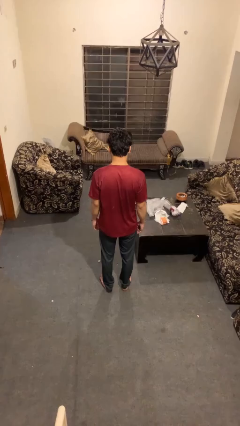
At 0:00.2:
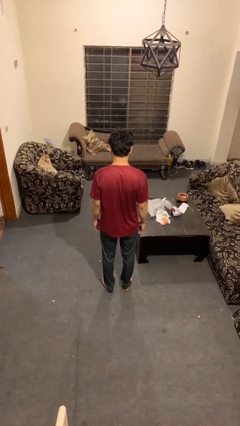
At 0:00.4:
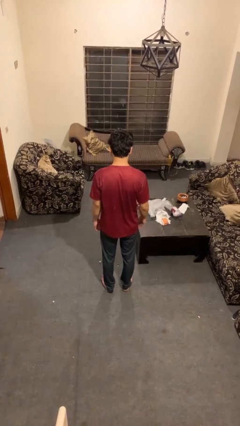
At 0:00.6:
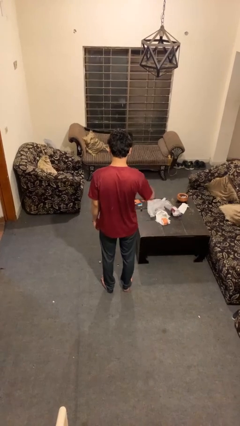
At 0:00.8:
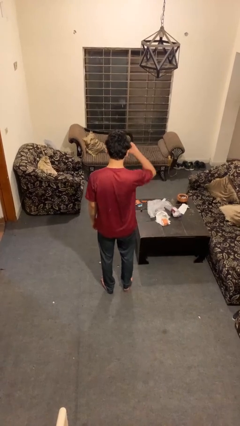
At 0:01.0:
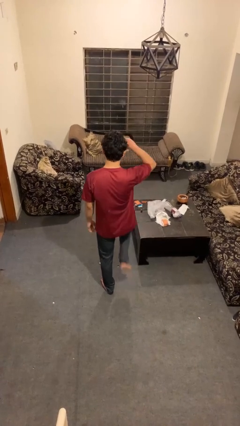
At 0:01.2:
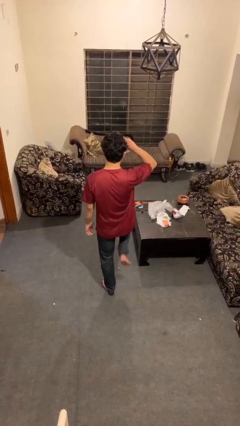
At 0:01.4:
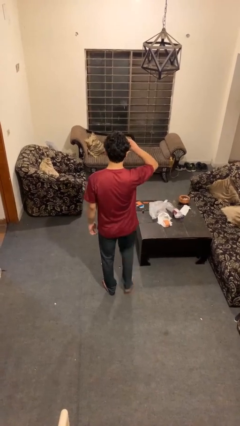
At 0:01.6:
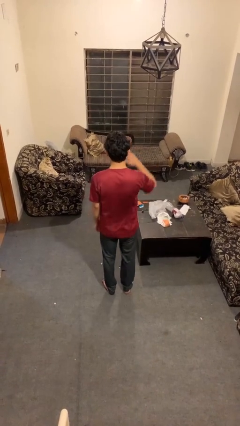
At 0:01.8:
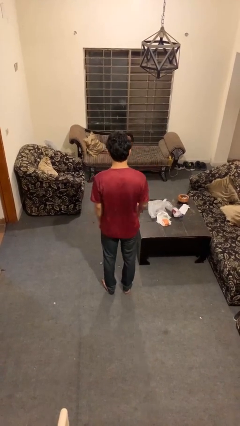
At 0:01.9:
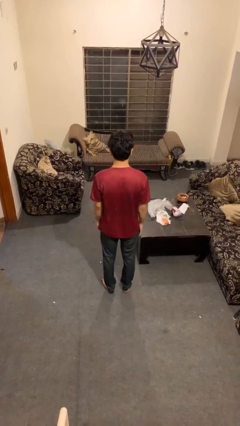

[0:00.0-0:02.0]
person salutes

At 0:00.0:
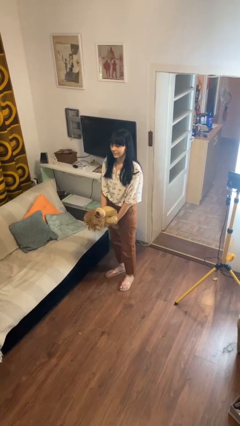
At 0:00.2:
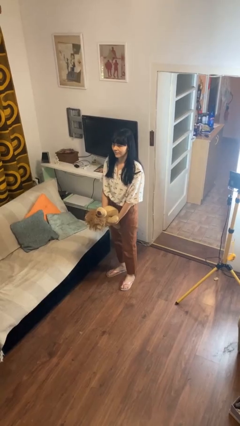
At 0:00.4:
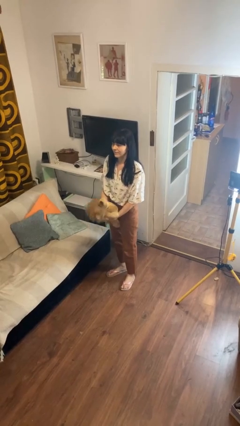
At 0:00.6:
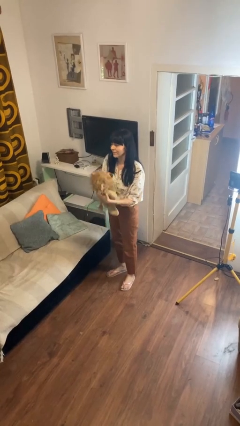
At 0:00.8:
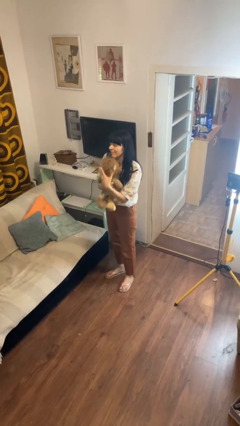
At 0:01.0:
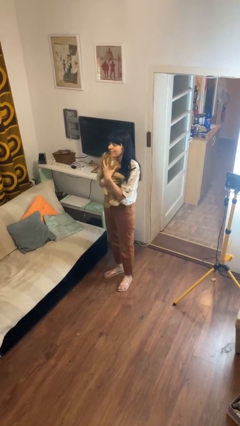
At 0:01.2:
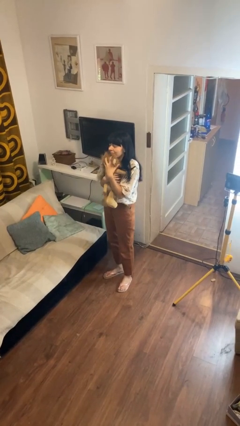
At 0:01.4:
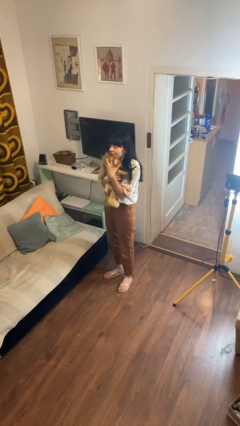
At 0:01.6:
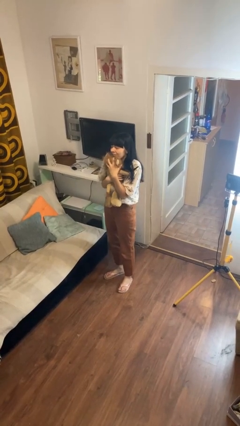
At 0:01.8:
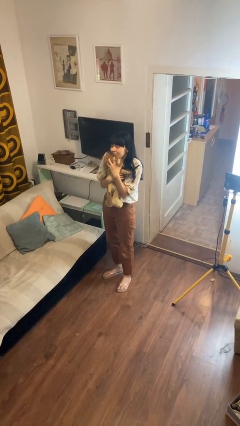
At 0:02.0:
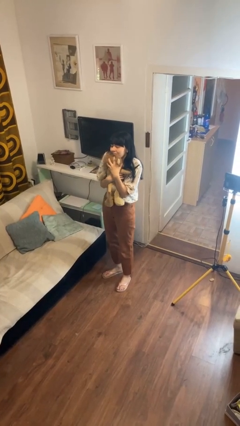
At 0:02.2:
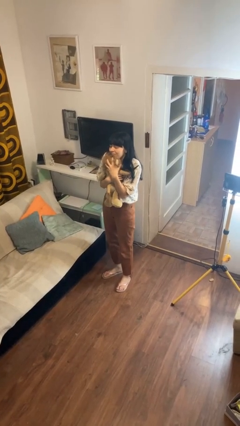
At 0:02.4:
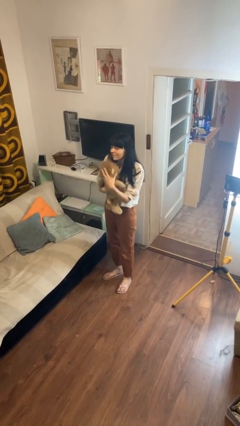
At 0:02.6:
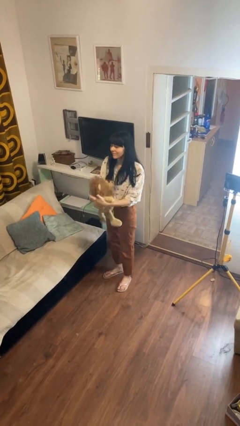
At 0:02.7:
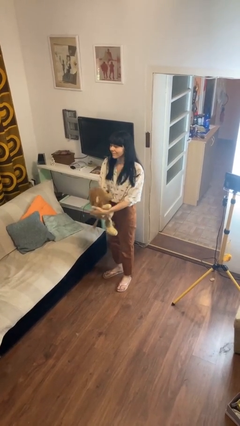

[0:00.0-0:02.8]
person hugs stuffed animal

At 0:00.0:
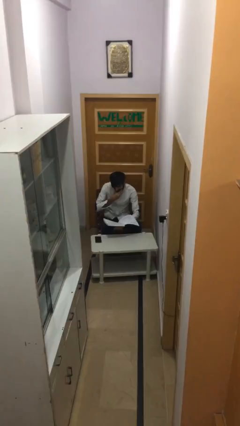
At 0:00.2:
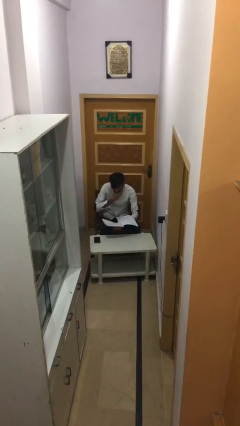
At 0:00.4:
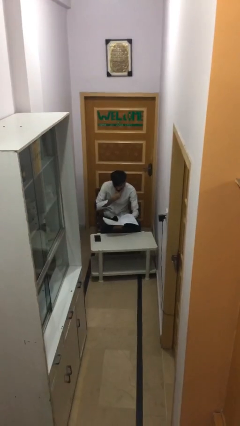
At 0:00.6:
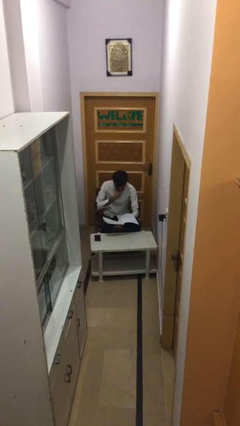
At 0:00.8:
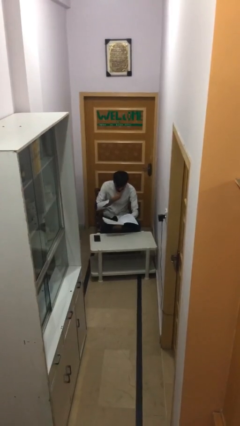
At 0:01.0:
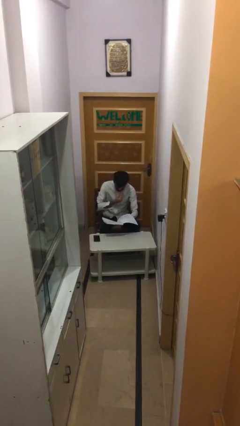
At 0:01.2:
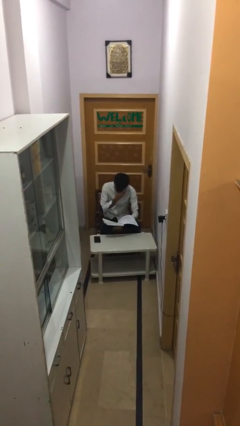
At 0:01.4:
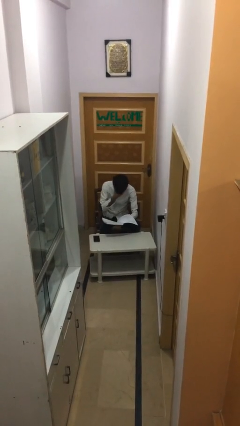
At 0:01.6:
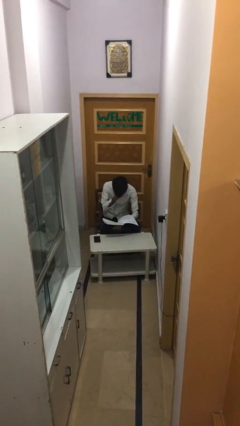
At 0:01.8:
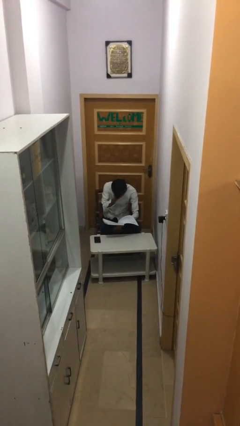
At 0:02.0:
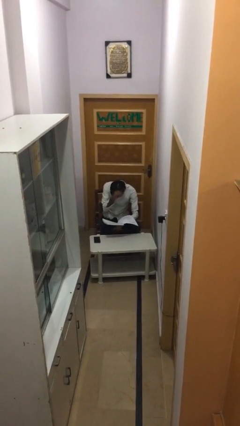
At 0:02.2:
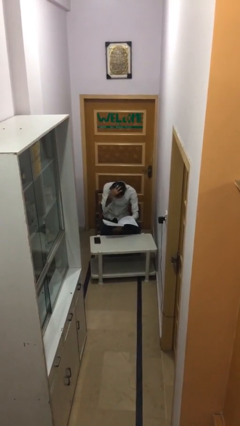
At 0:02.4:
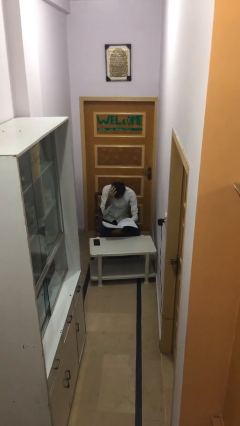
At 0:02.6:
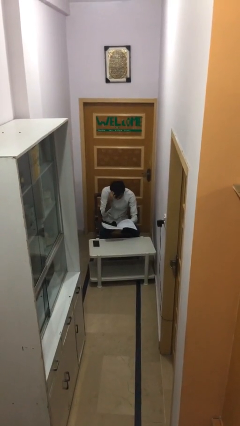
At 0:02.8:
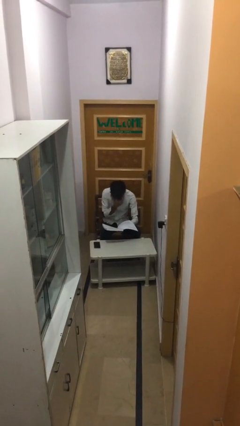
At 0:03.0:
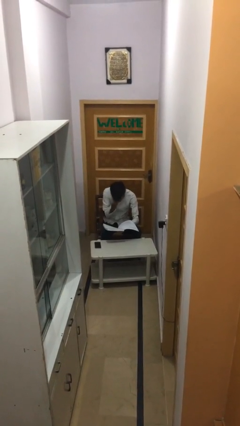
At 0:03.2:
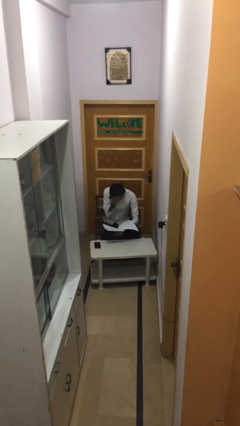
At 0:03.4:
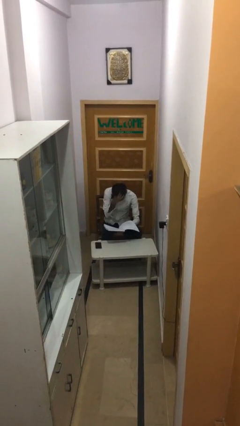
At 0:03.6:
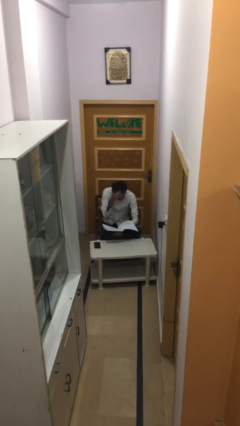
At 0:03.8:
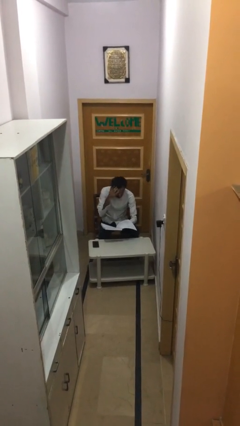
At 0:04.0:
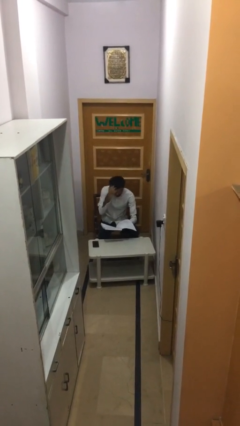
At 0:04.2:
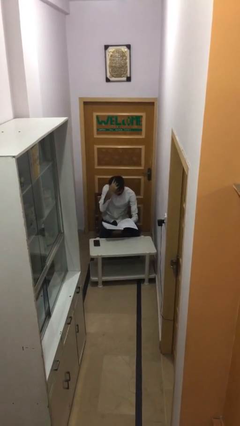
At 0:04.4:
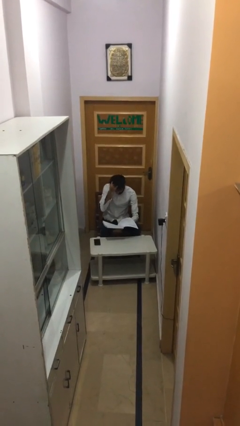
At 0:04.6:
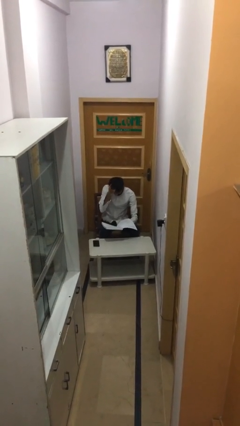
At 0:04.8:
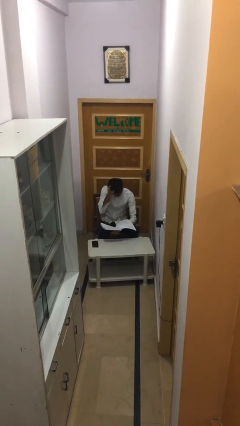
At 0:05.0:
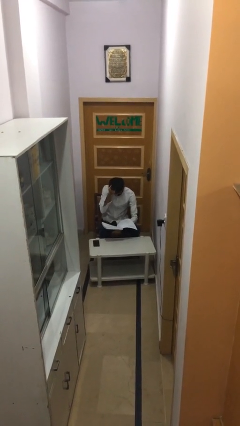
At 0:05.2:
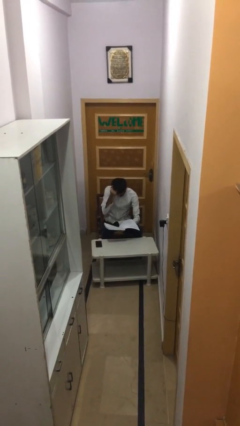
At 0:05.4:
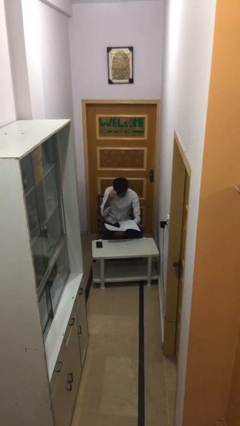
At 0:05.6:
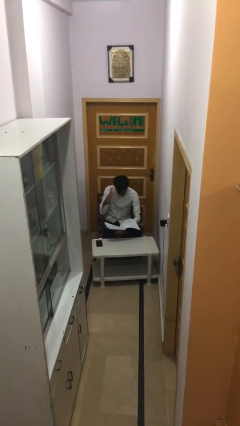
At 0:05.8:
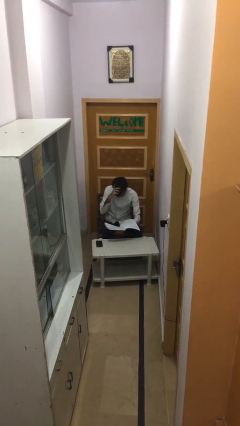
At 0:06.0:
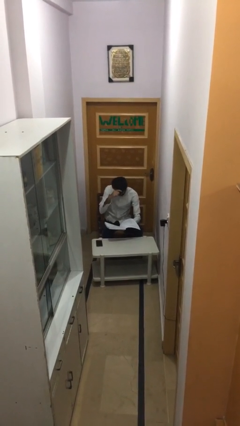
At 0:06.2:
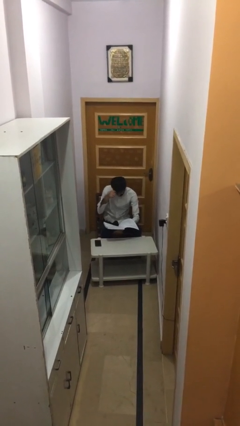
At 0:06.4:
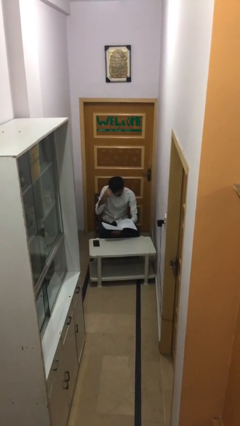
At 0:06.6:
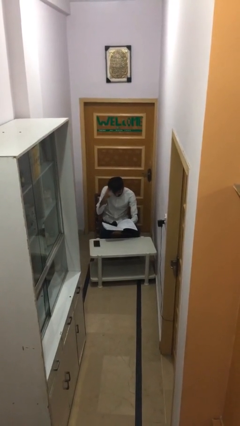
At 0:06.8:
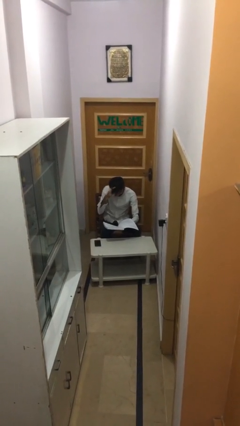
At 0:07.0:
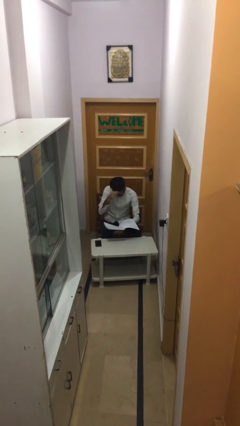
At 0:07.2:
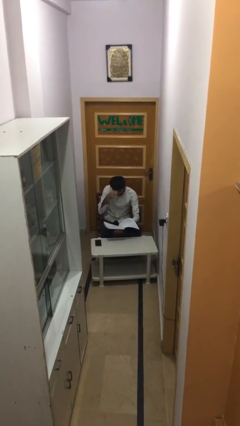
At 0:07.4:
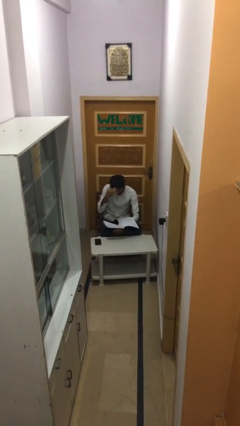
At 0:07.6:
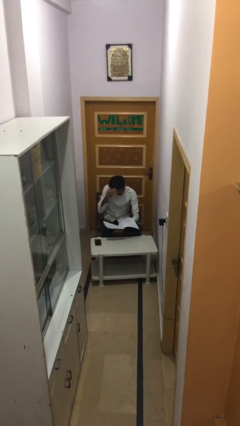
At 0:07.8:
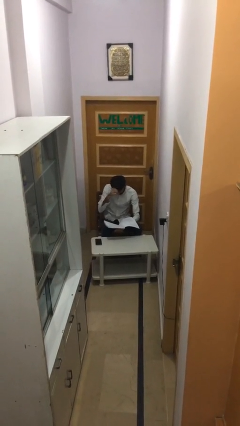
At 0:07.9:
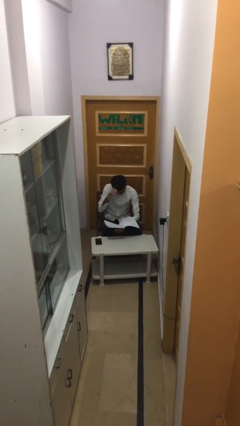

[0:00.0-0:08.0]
person reads document

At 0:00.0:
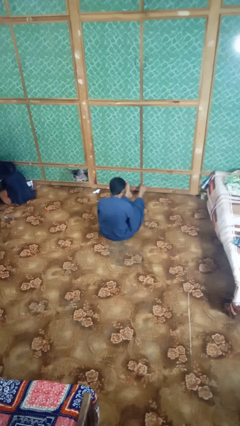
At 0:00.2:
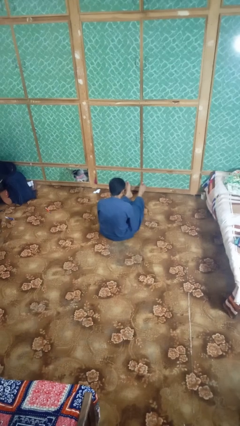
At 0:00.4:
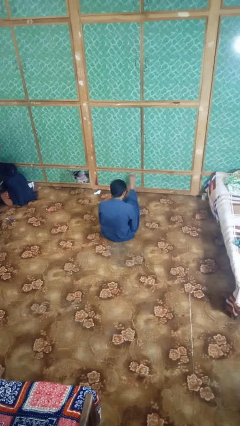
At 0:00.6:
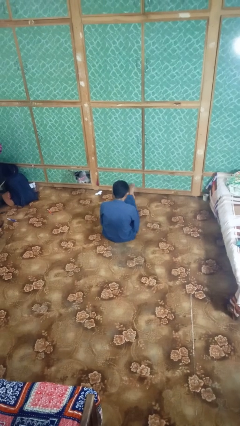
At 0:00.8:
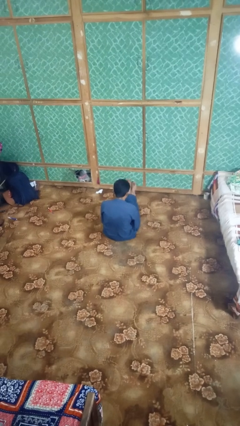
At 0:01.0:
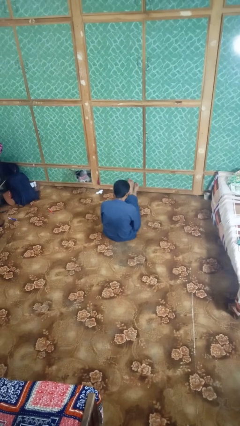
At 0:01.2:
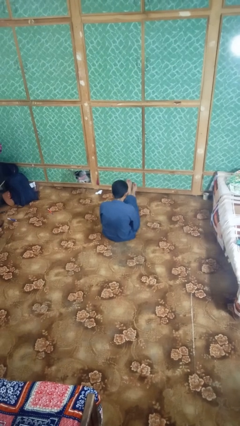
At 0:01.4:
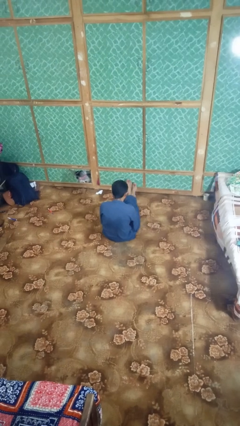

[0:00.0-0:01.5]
person crosses legs

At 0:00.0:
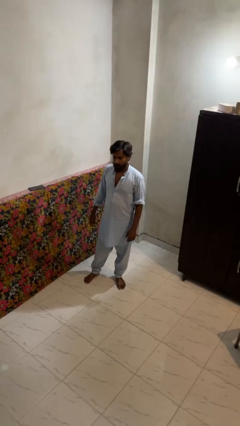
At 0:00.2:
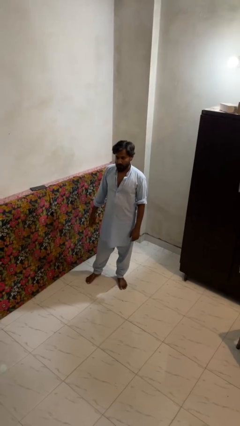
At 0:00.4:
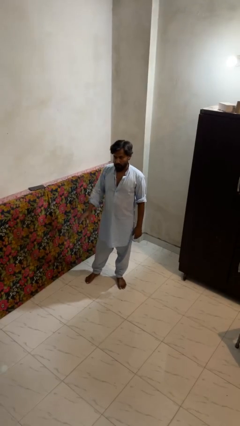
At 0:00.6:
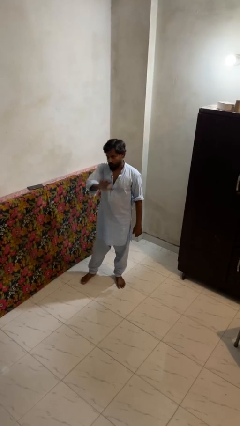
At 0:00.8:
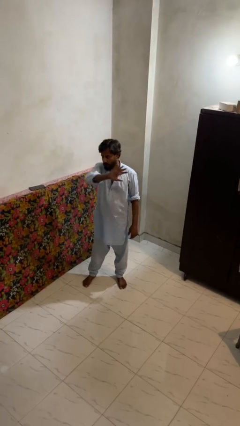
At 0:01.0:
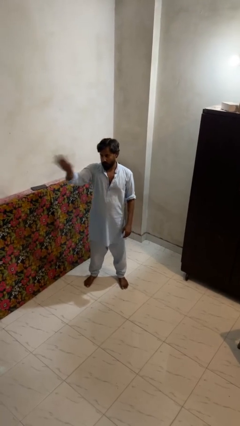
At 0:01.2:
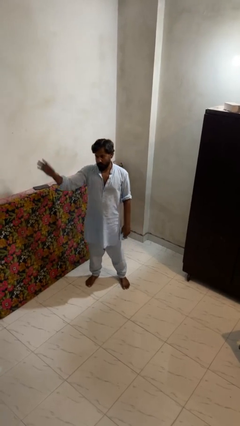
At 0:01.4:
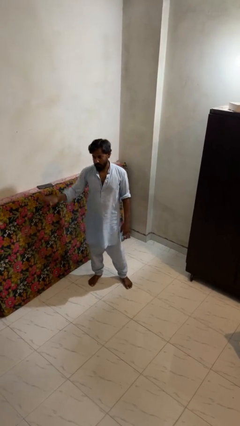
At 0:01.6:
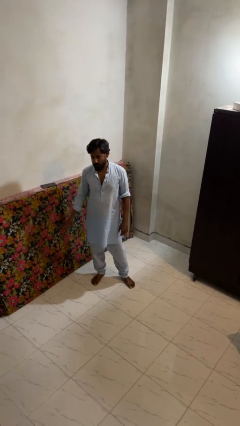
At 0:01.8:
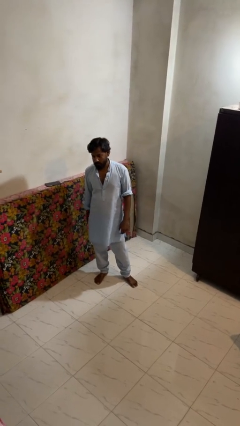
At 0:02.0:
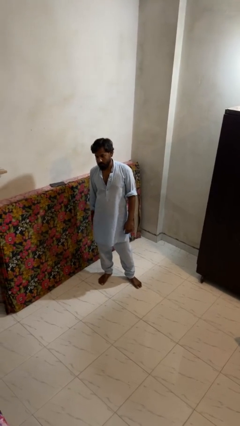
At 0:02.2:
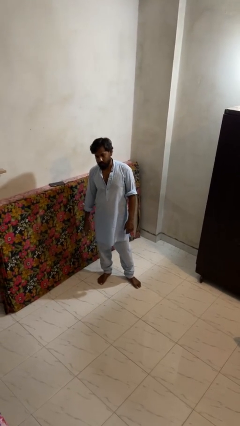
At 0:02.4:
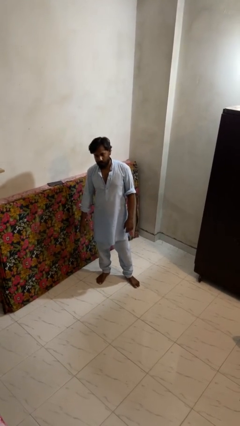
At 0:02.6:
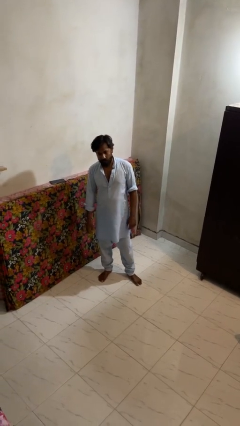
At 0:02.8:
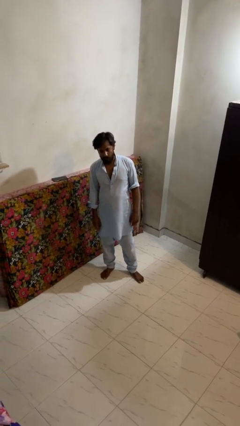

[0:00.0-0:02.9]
person gestures swipe right
